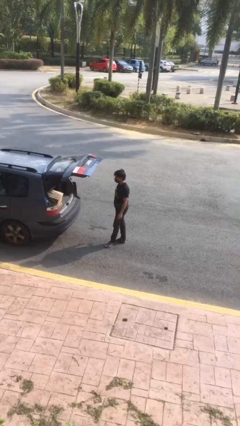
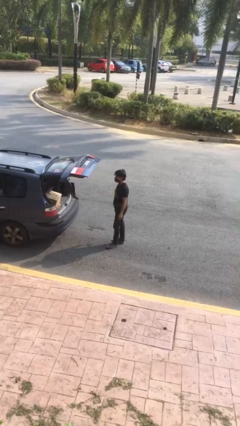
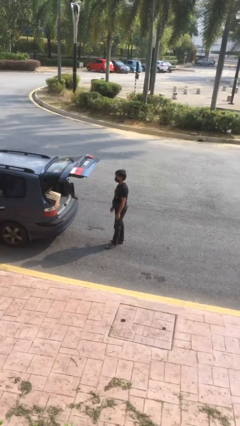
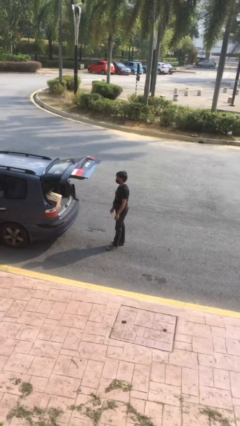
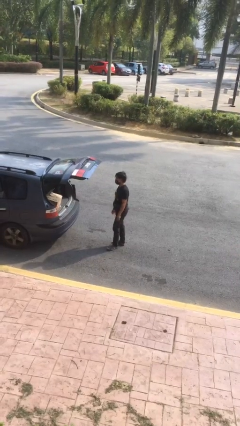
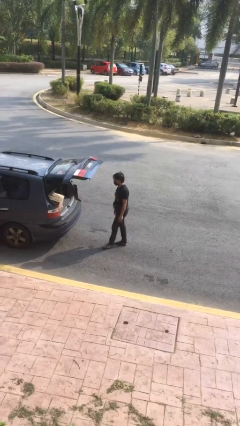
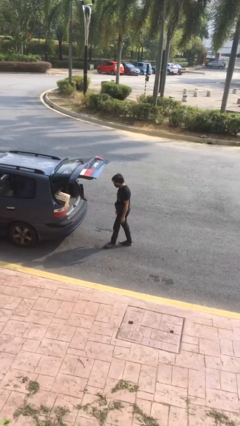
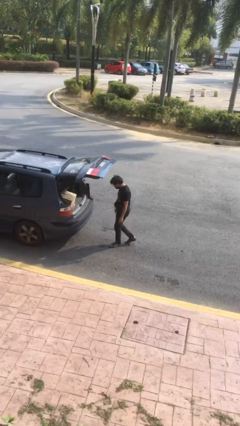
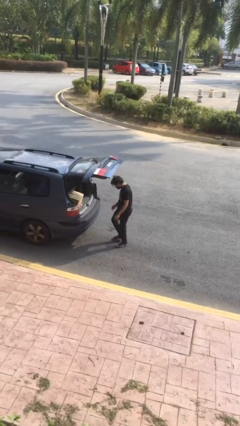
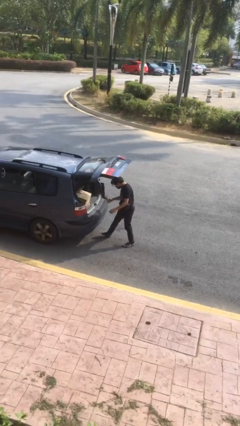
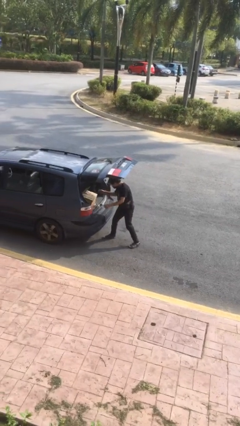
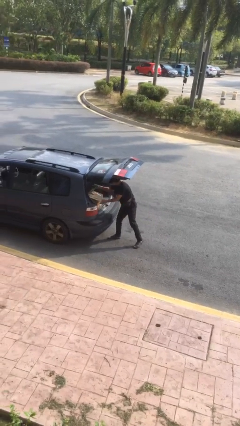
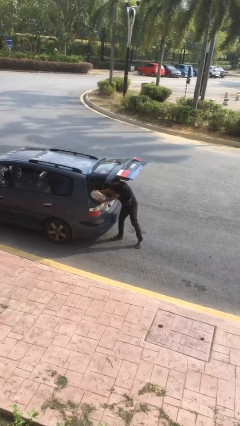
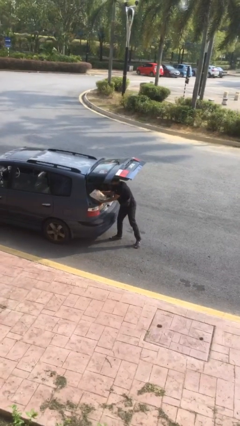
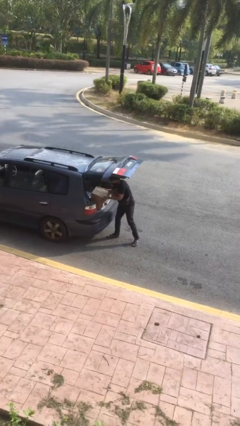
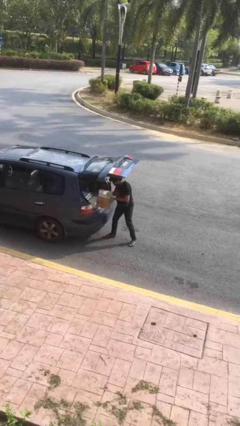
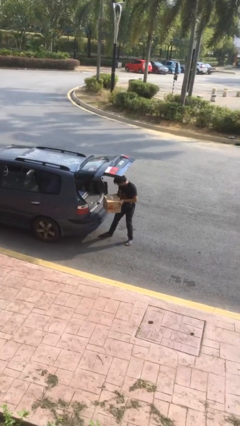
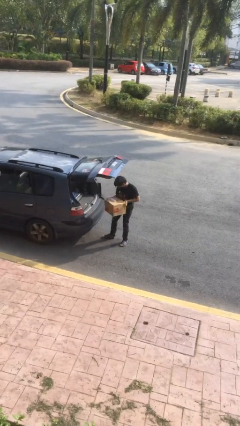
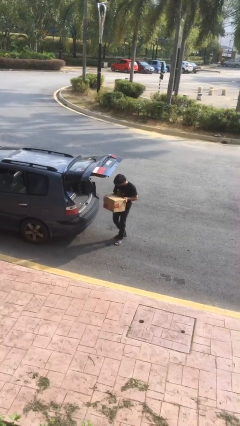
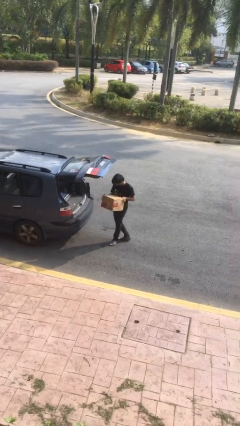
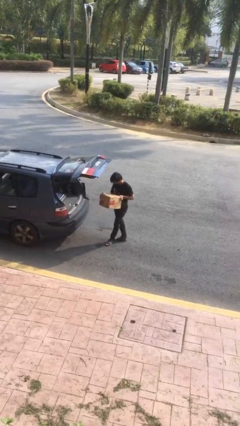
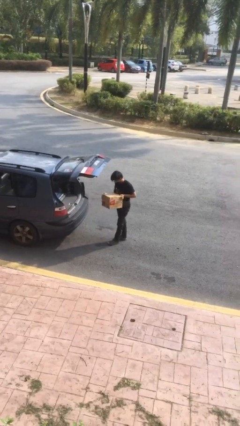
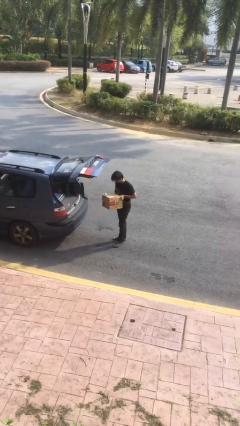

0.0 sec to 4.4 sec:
person unloads car

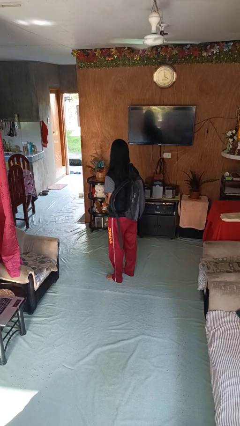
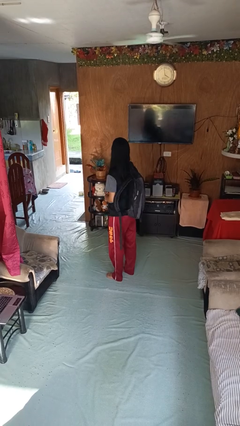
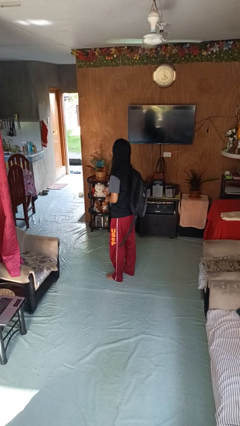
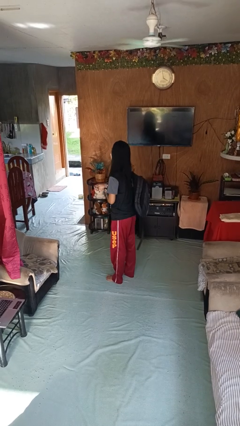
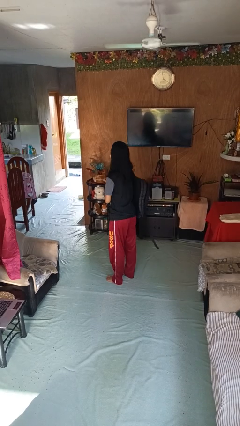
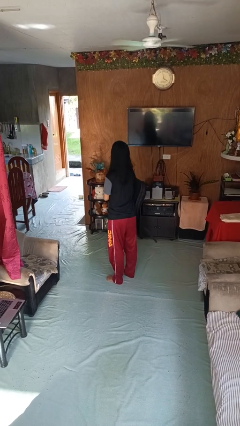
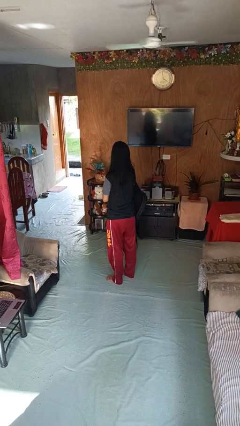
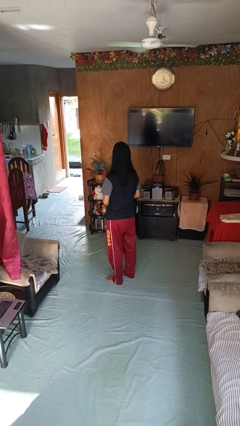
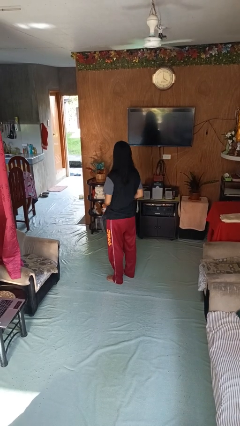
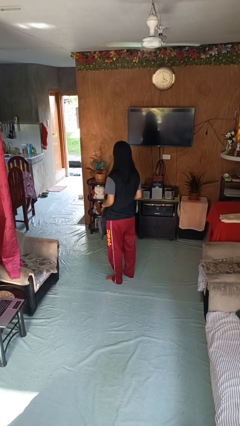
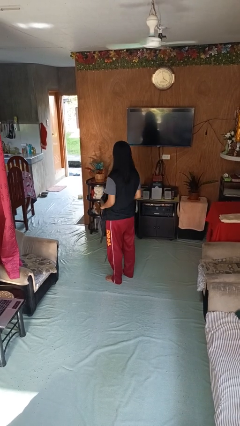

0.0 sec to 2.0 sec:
person takes off backpack

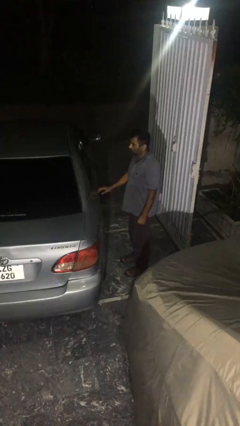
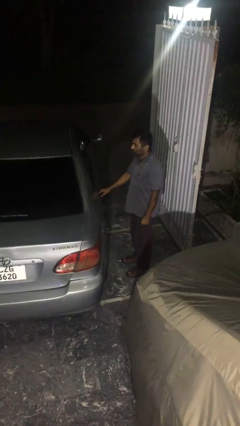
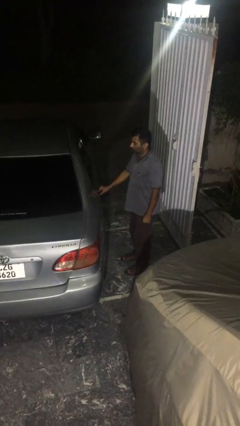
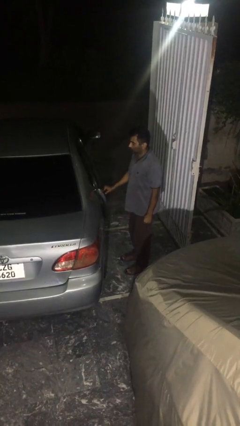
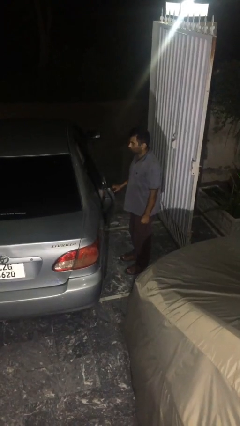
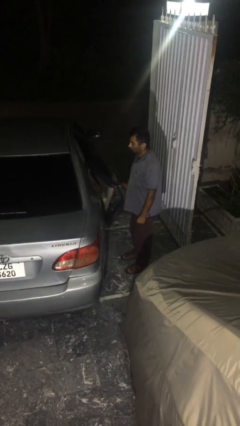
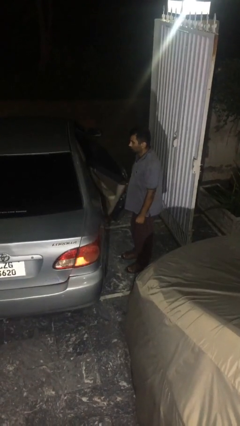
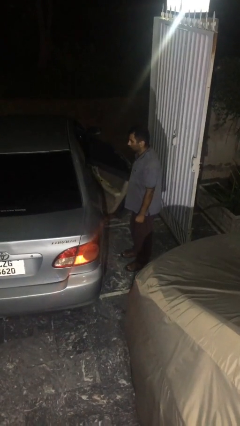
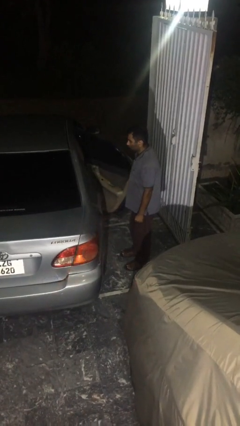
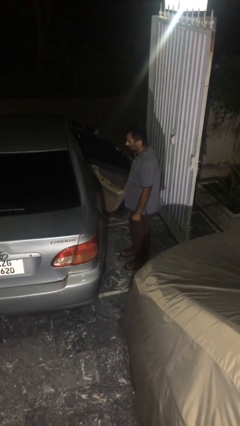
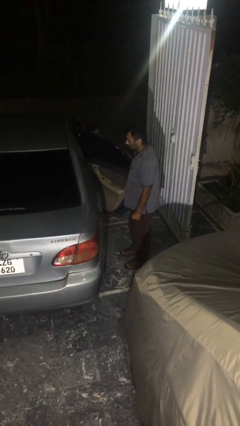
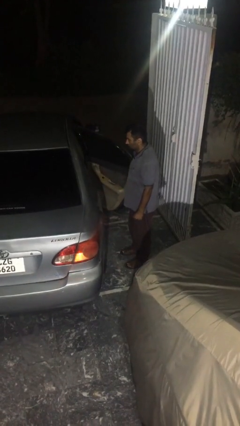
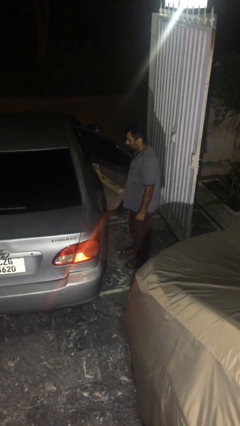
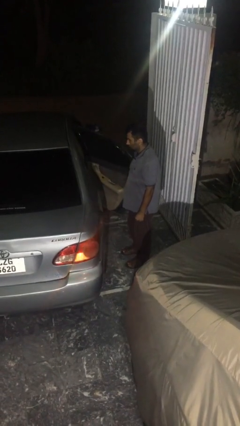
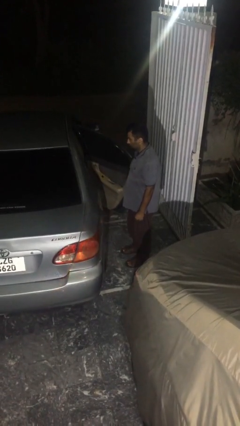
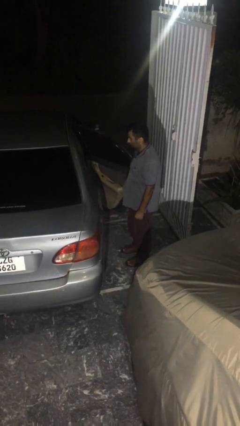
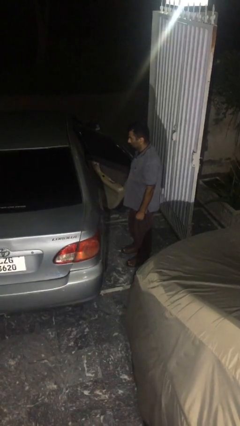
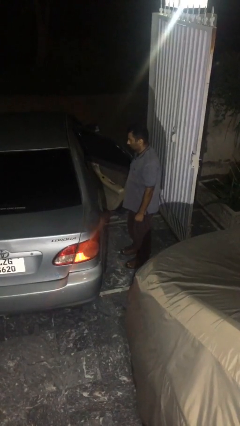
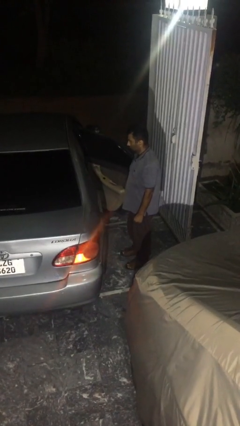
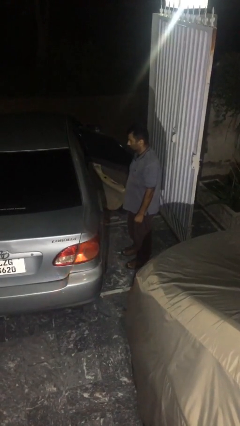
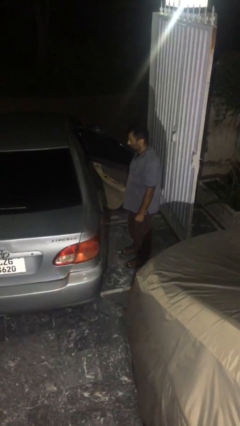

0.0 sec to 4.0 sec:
person opens car door

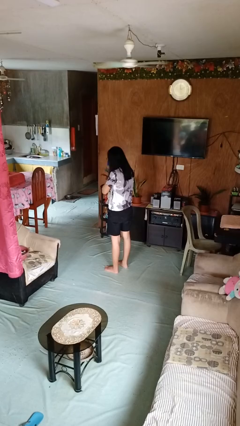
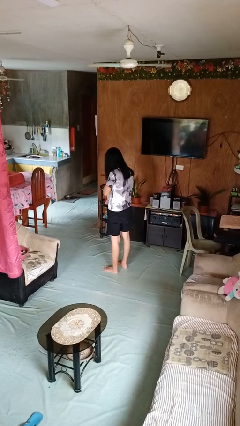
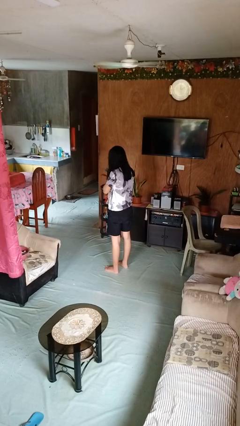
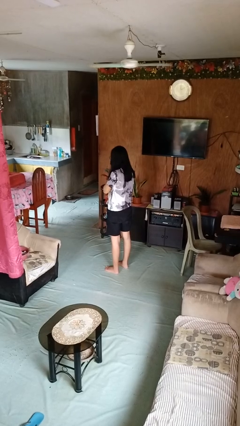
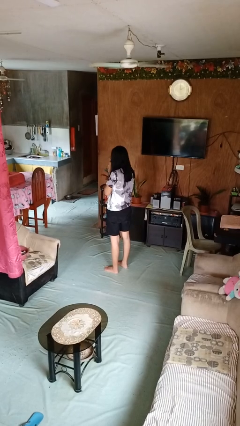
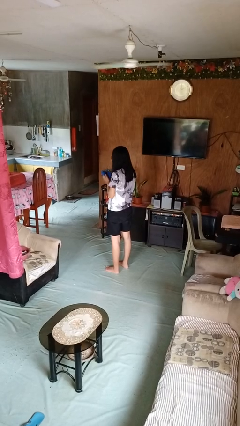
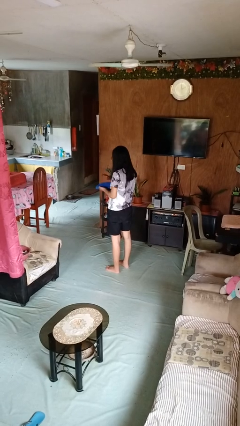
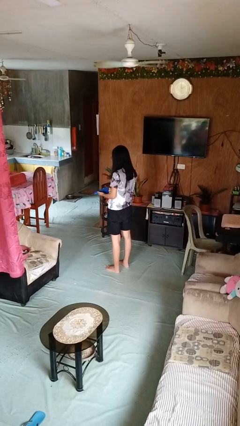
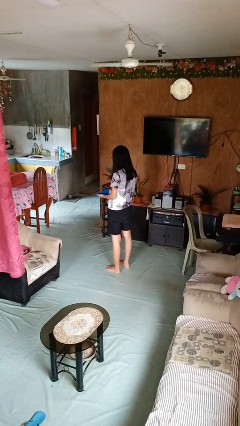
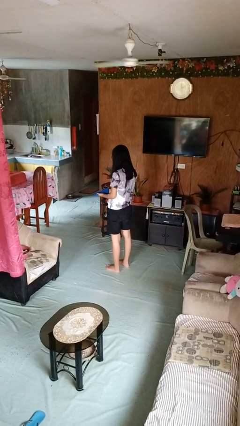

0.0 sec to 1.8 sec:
person blows nose

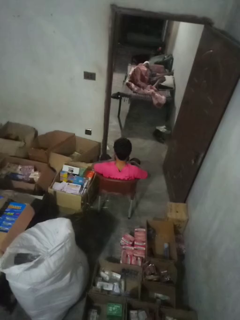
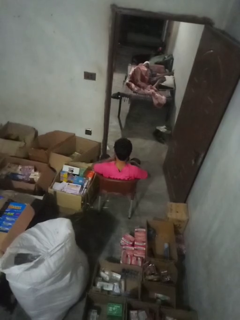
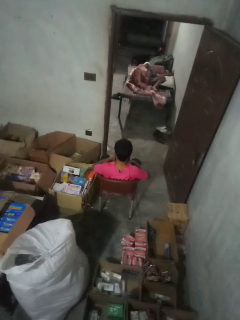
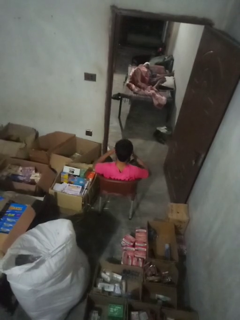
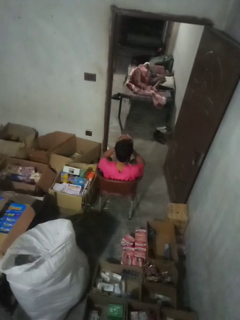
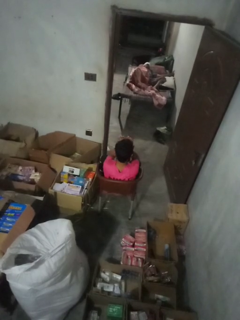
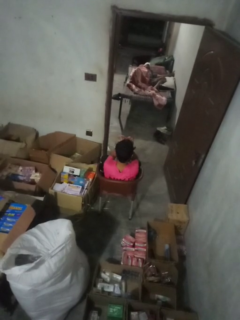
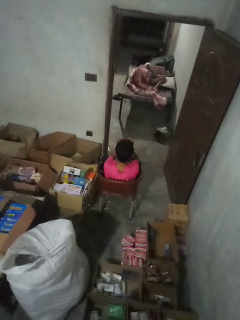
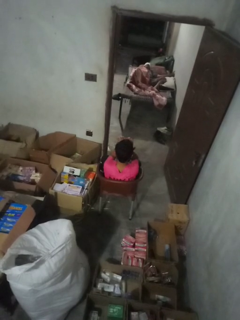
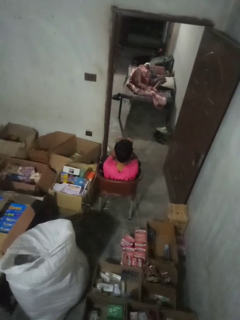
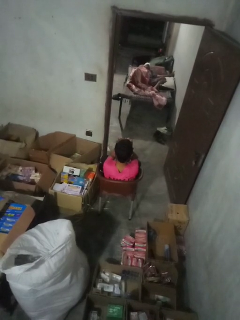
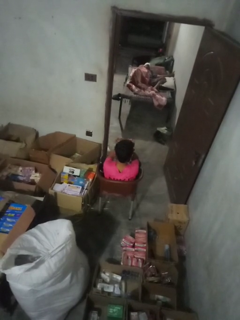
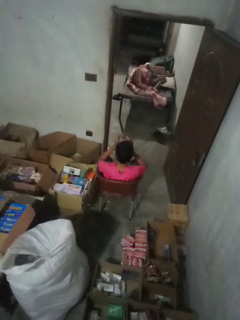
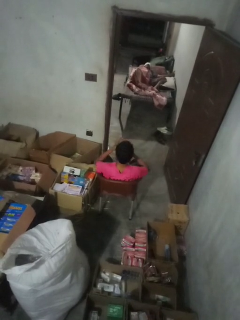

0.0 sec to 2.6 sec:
person rubs eyes

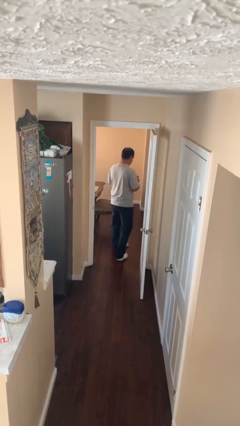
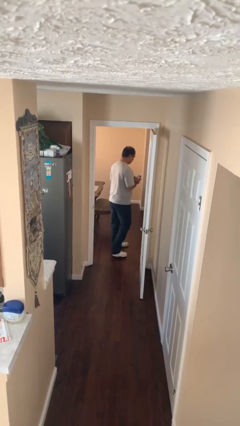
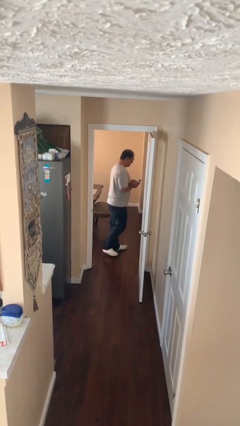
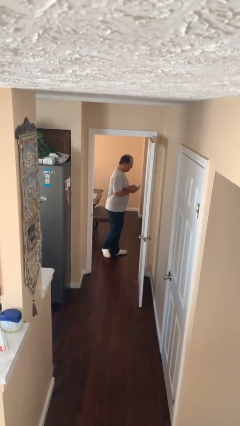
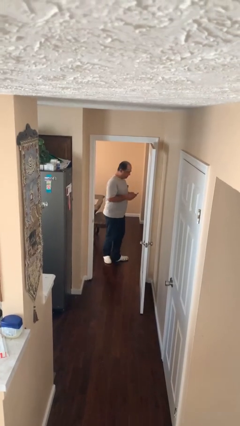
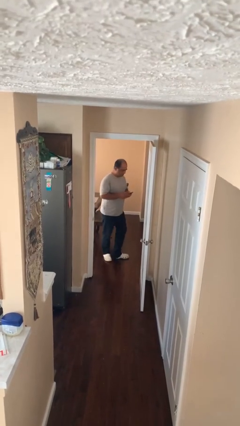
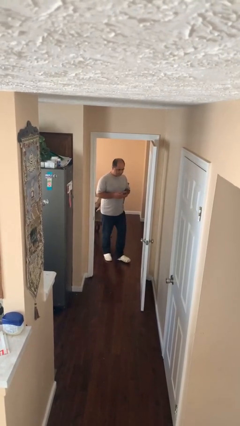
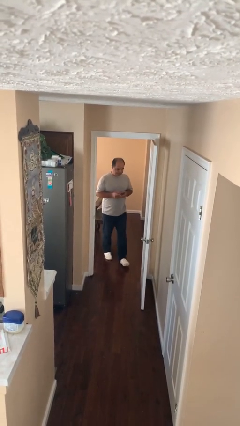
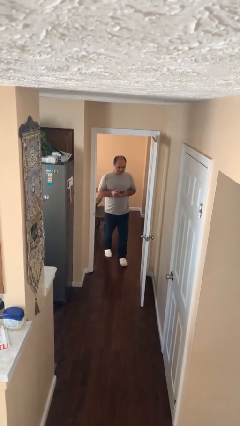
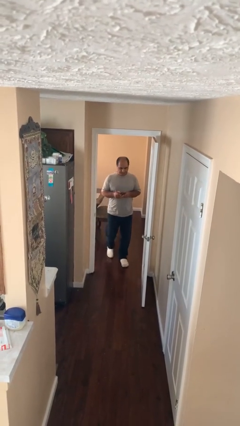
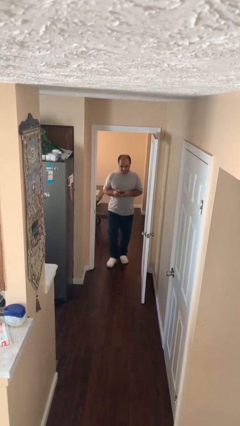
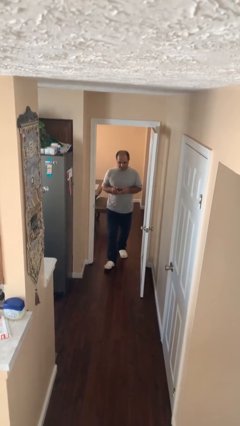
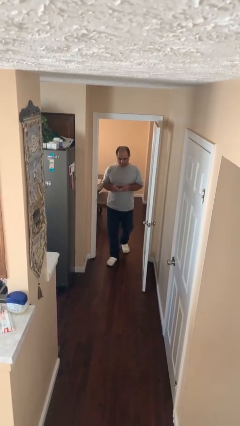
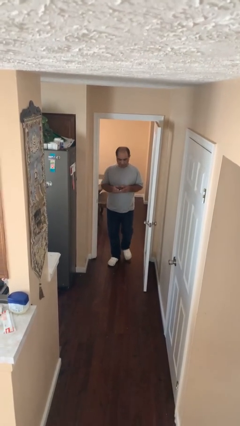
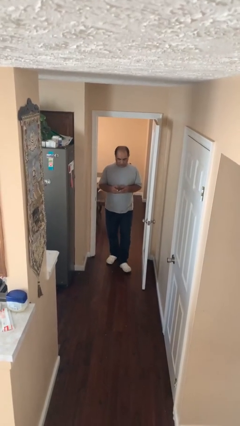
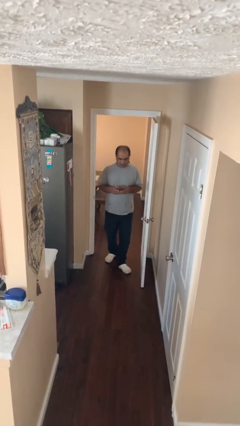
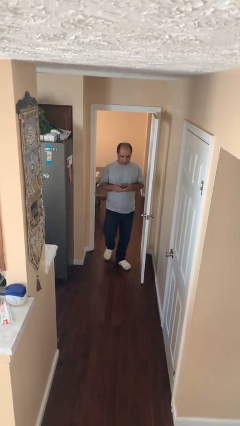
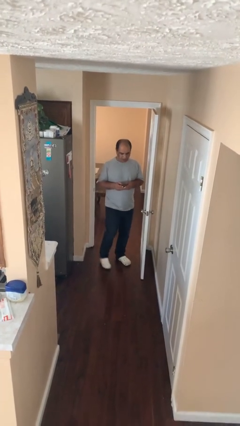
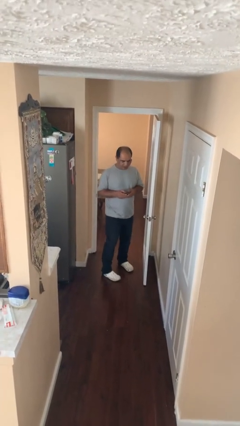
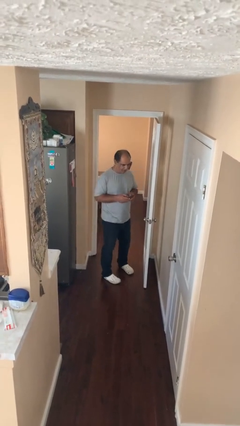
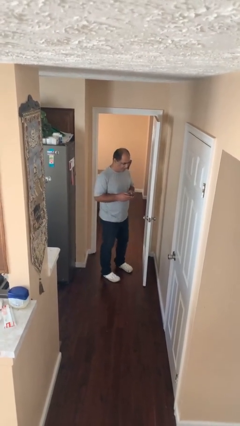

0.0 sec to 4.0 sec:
person enters scene through structure
